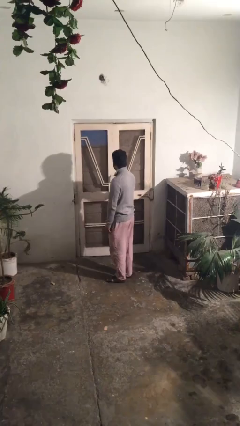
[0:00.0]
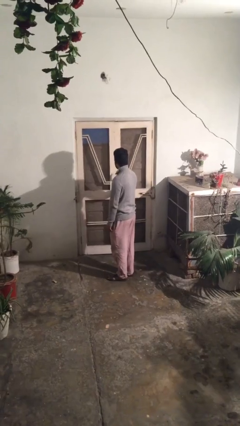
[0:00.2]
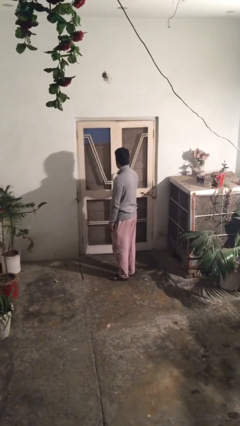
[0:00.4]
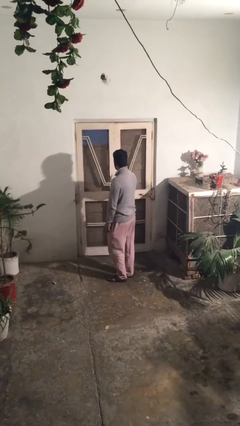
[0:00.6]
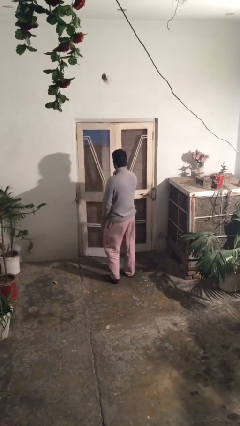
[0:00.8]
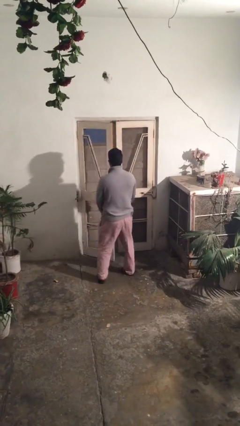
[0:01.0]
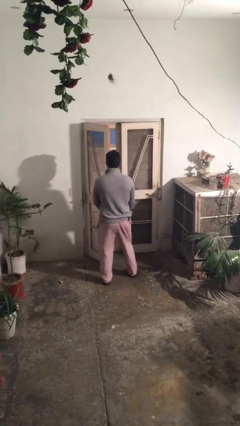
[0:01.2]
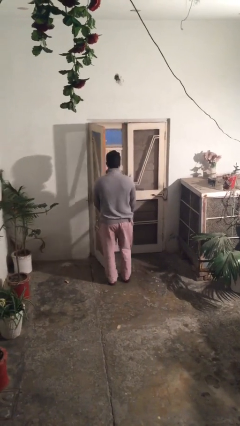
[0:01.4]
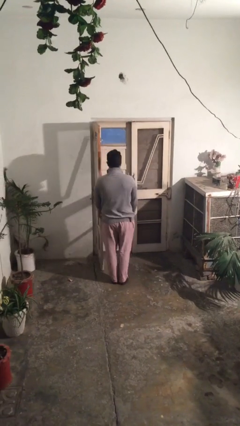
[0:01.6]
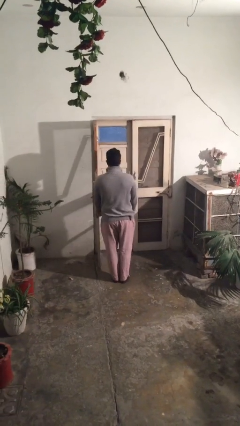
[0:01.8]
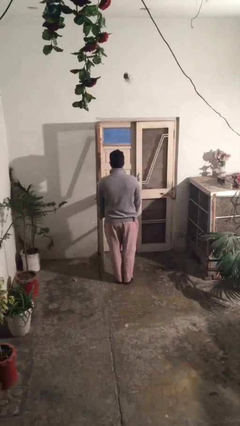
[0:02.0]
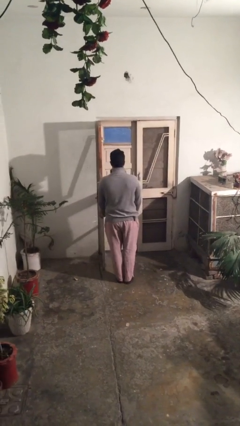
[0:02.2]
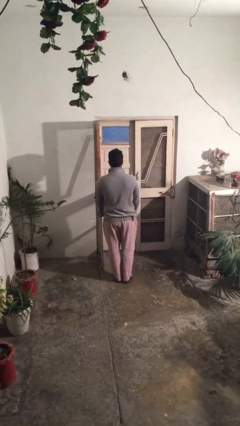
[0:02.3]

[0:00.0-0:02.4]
person opens facility door

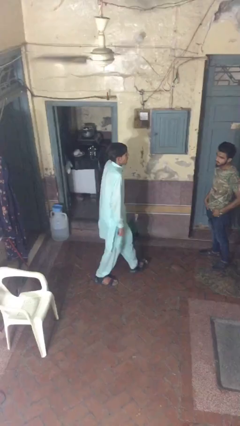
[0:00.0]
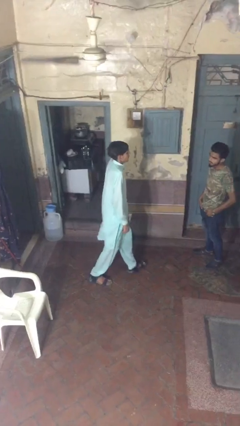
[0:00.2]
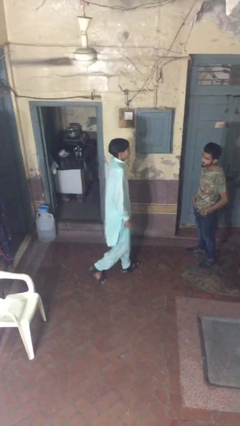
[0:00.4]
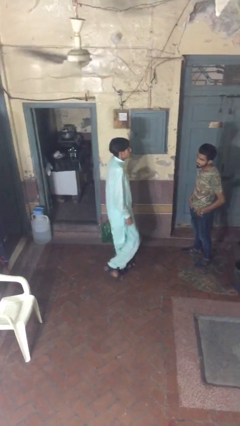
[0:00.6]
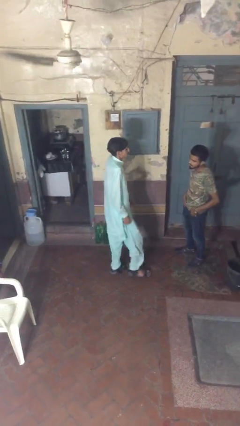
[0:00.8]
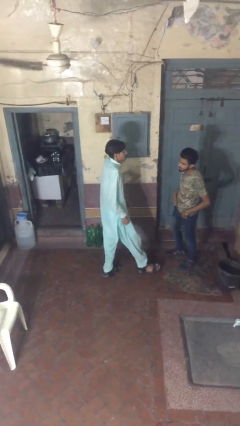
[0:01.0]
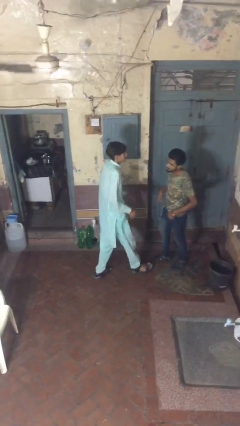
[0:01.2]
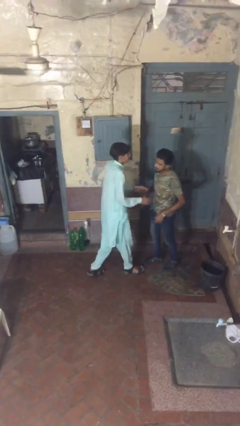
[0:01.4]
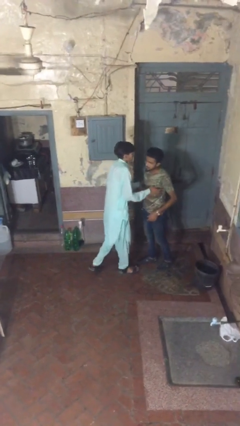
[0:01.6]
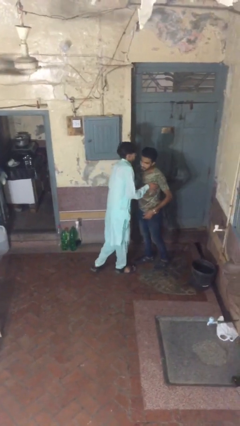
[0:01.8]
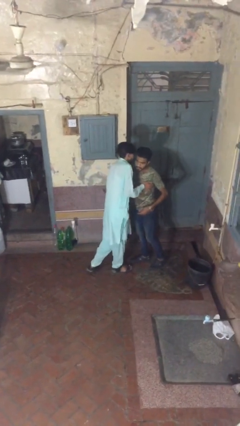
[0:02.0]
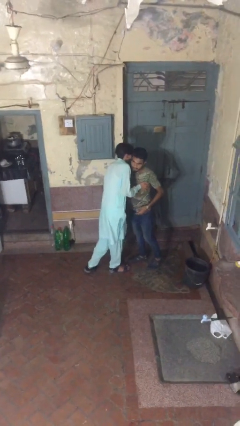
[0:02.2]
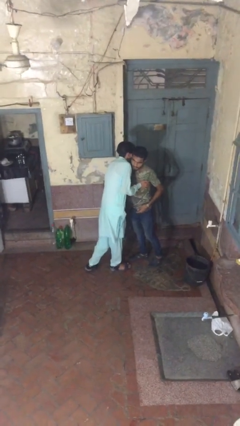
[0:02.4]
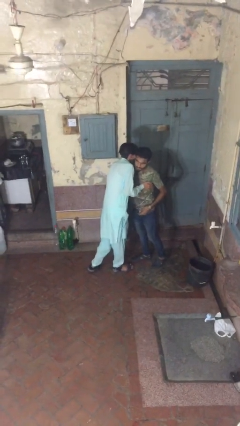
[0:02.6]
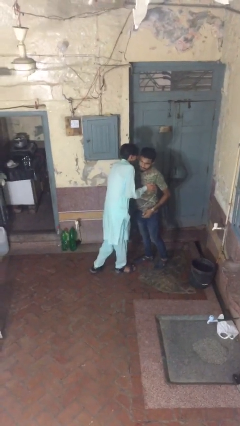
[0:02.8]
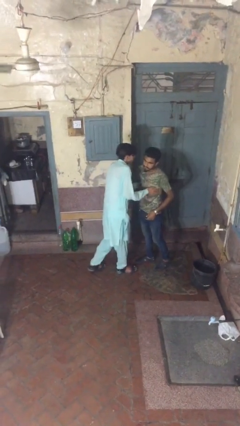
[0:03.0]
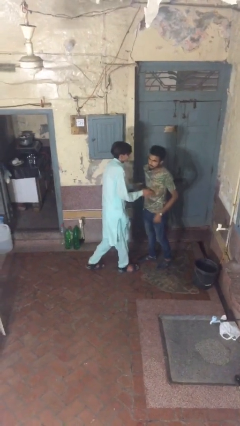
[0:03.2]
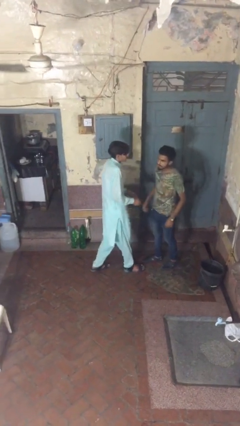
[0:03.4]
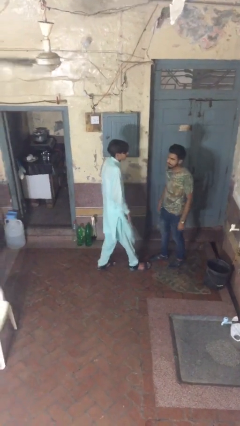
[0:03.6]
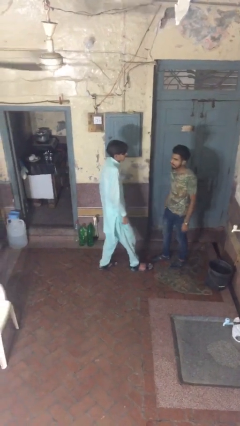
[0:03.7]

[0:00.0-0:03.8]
person embraces person

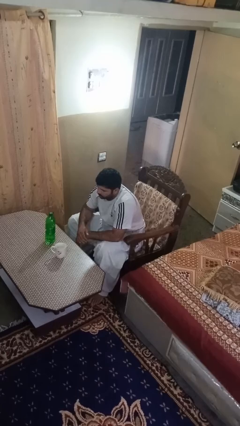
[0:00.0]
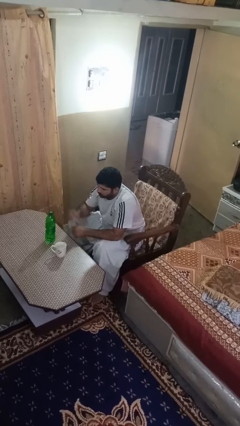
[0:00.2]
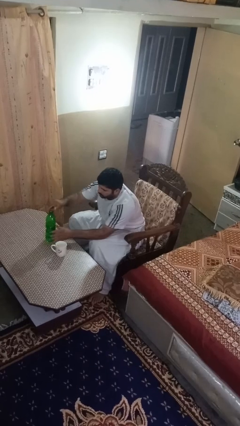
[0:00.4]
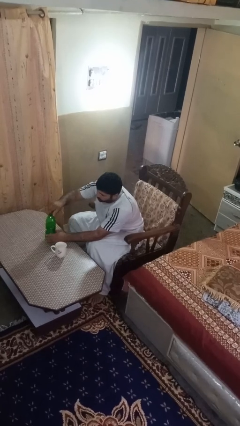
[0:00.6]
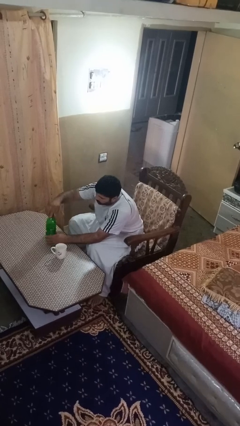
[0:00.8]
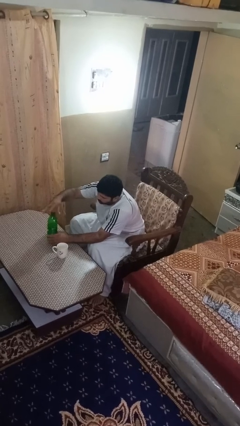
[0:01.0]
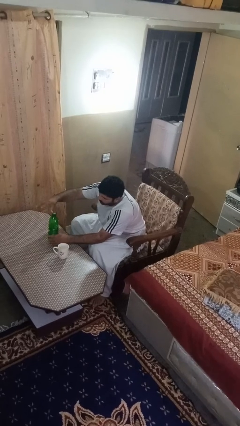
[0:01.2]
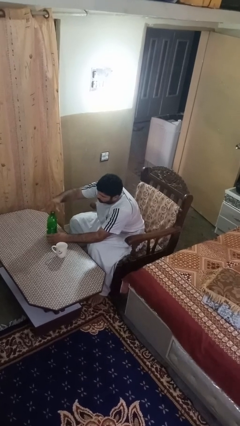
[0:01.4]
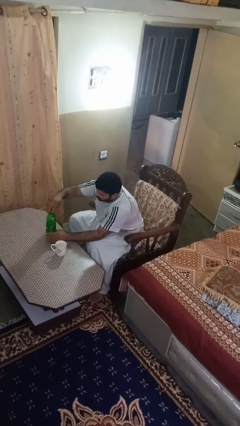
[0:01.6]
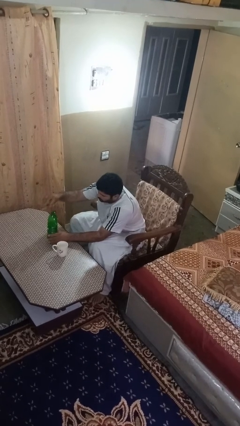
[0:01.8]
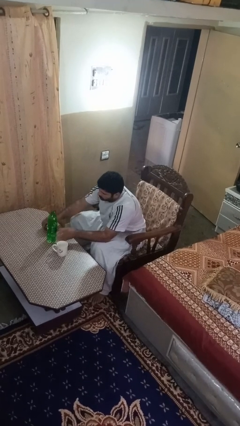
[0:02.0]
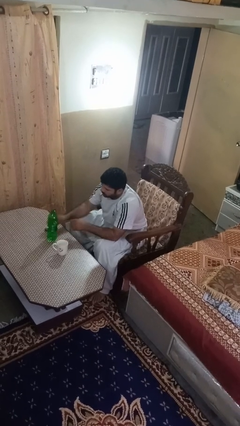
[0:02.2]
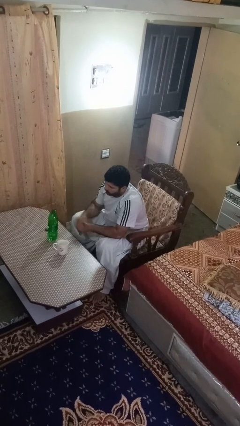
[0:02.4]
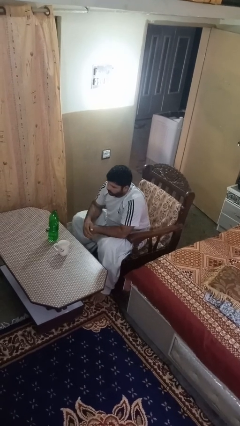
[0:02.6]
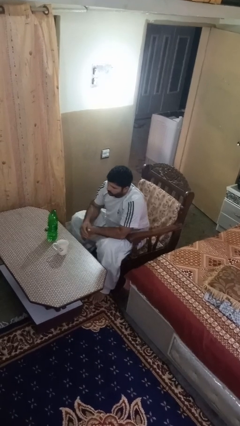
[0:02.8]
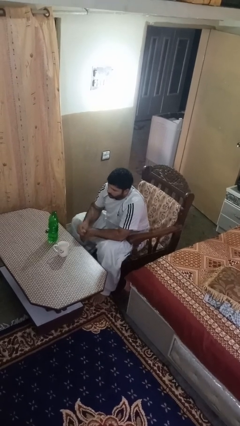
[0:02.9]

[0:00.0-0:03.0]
person unscrews lid from bottle

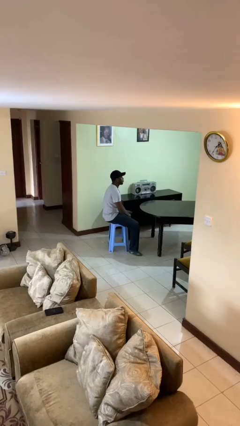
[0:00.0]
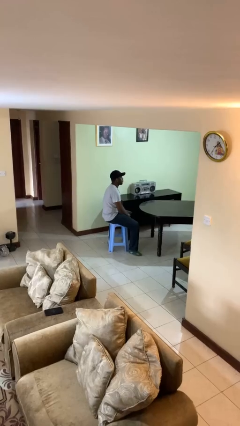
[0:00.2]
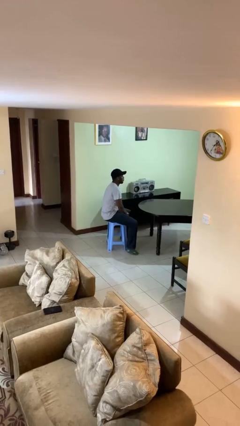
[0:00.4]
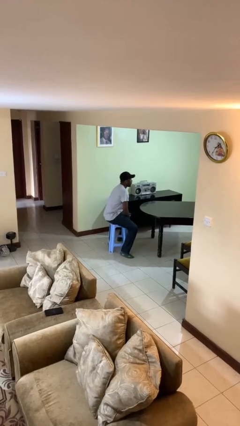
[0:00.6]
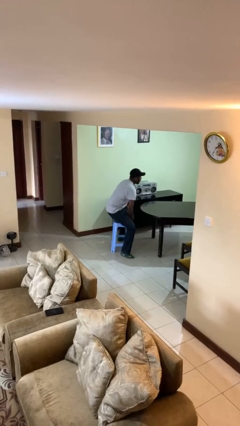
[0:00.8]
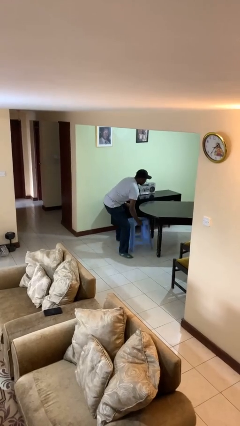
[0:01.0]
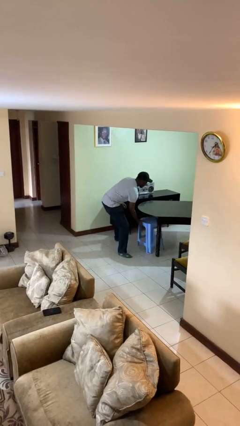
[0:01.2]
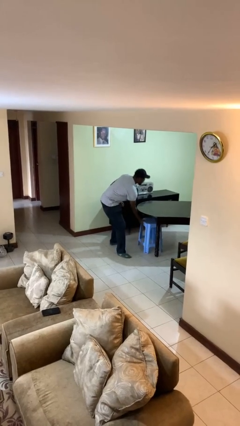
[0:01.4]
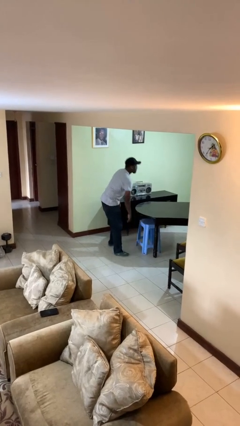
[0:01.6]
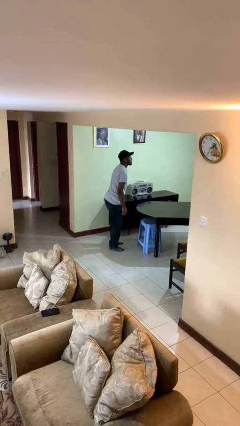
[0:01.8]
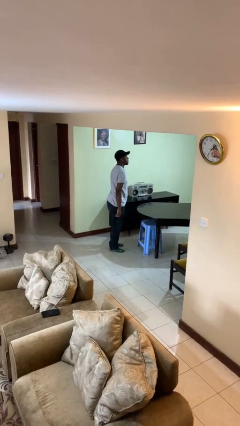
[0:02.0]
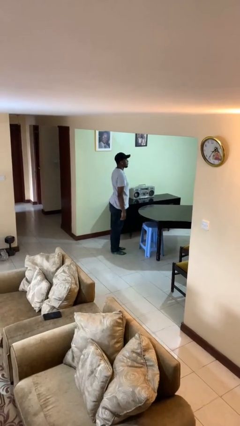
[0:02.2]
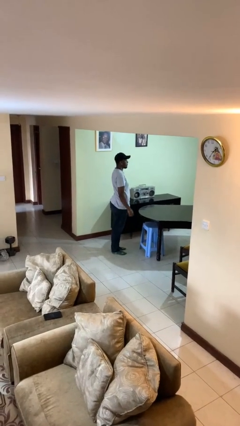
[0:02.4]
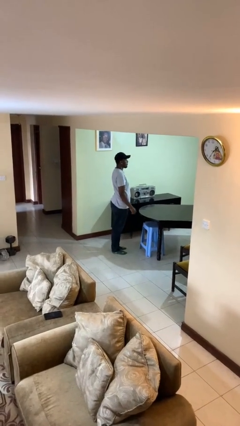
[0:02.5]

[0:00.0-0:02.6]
person stands up

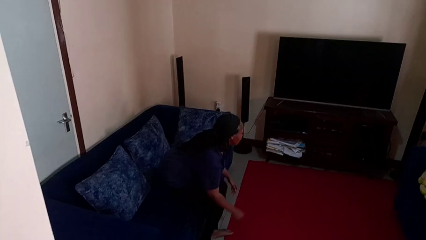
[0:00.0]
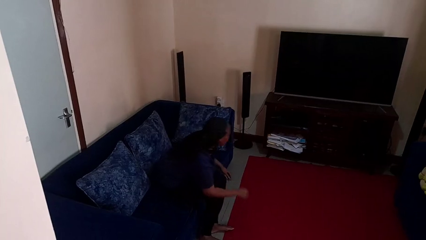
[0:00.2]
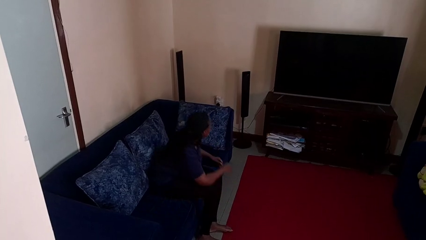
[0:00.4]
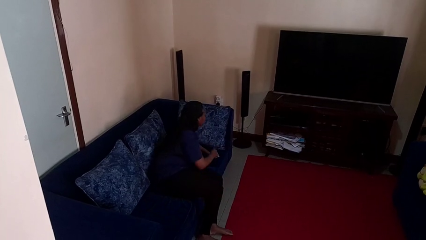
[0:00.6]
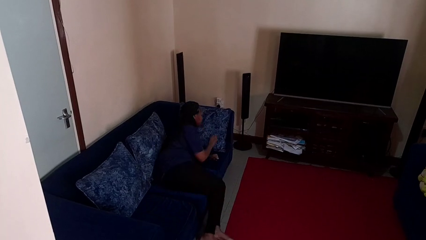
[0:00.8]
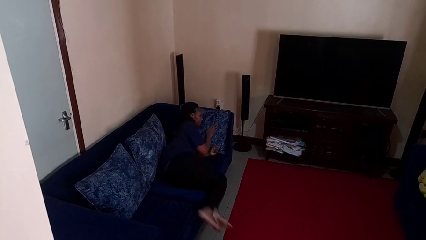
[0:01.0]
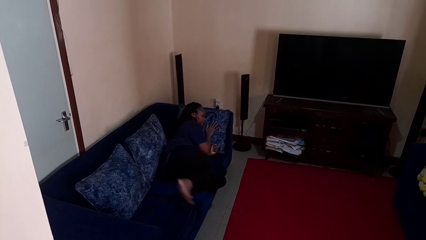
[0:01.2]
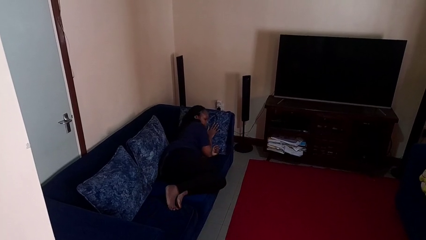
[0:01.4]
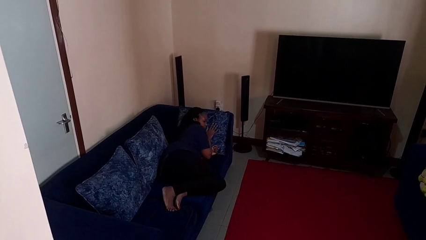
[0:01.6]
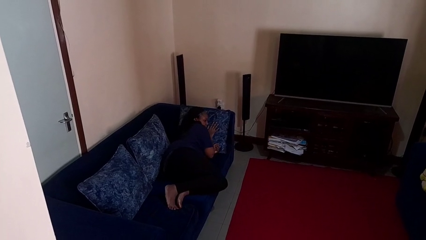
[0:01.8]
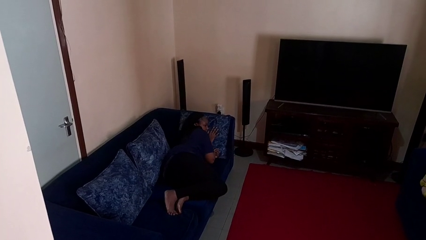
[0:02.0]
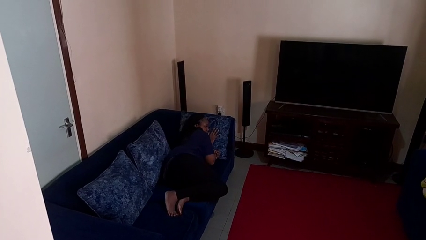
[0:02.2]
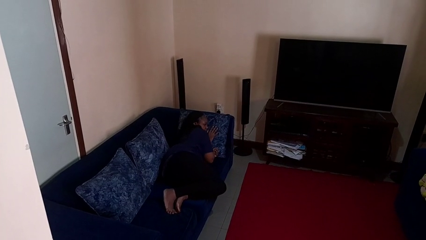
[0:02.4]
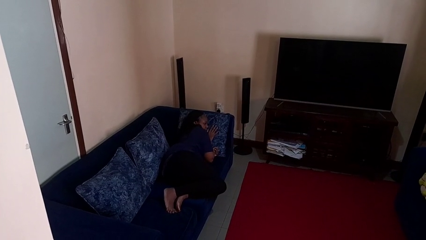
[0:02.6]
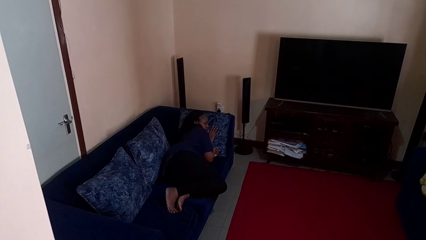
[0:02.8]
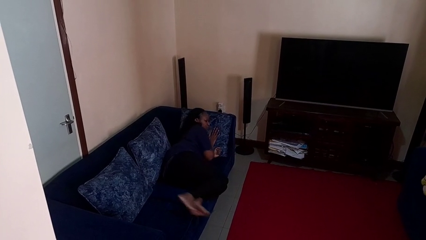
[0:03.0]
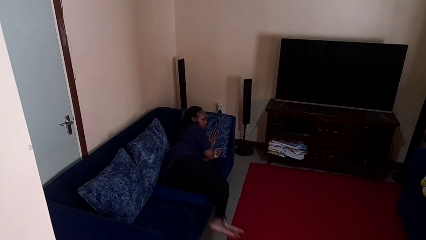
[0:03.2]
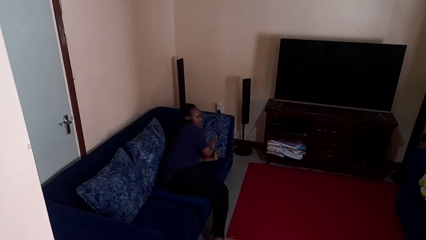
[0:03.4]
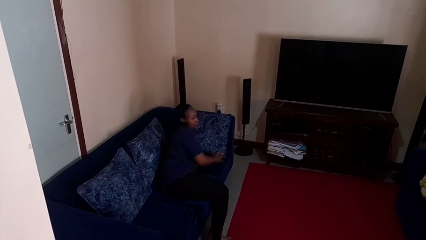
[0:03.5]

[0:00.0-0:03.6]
person lies down on couch

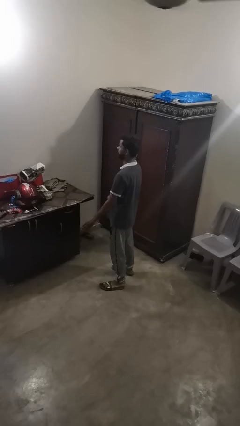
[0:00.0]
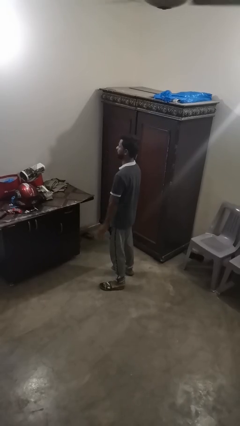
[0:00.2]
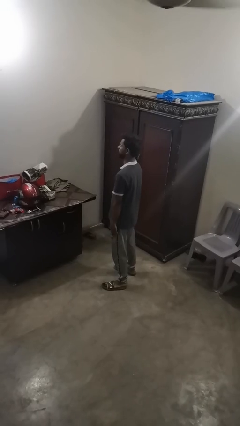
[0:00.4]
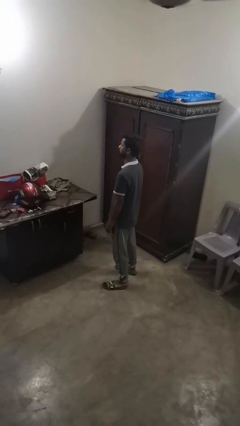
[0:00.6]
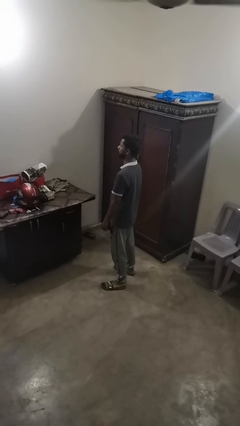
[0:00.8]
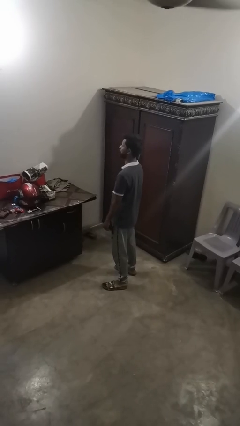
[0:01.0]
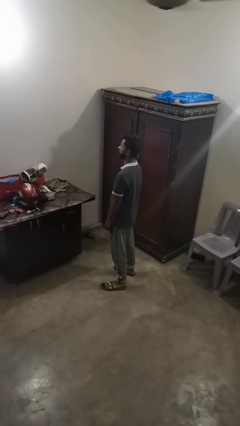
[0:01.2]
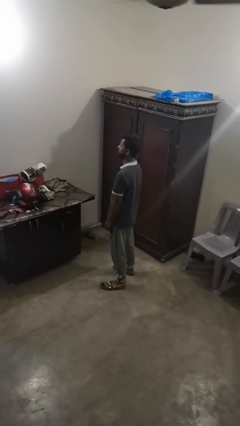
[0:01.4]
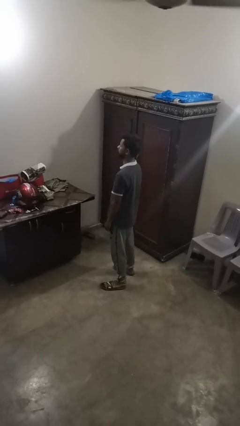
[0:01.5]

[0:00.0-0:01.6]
person slaps hands on thighs

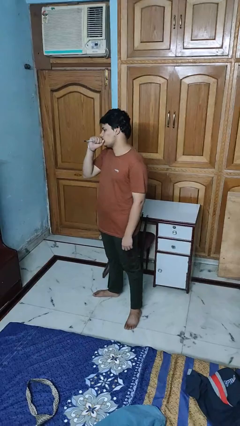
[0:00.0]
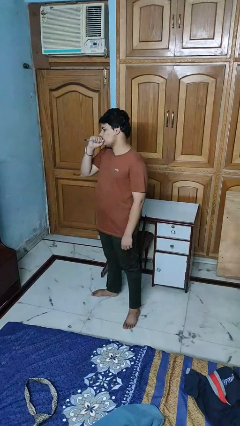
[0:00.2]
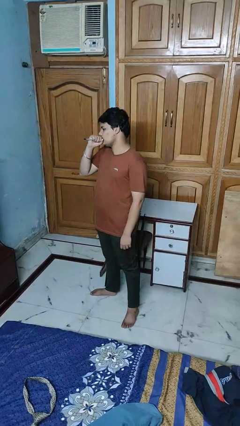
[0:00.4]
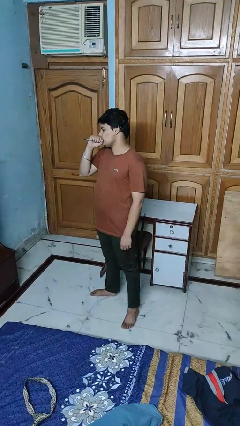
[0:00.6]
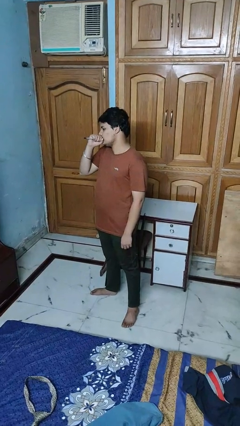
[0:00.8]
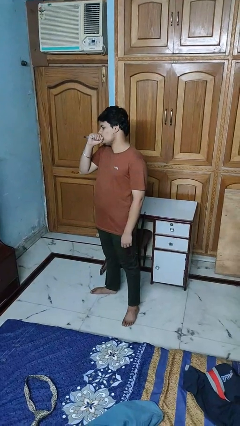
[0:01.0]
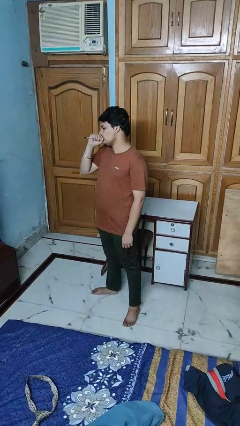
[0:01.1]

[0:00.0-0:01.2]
person vapes
